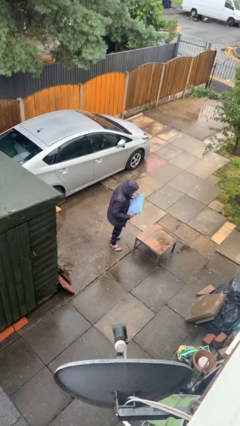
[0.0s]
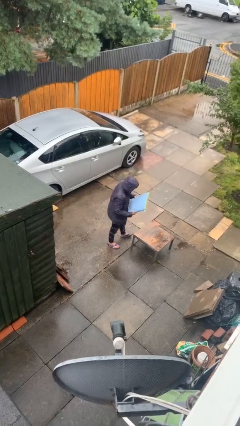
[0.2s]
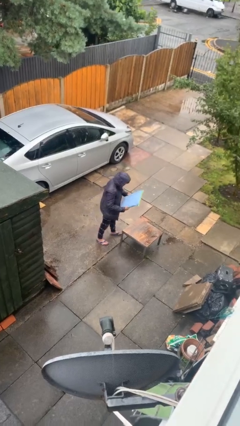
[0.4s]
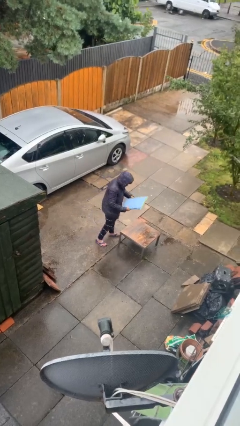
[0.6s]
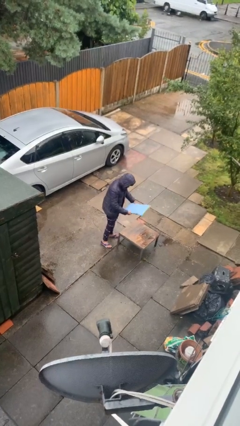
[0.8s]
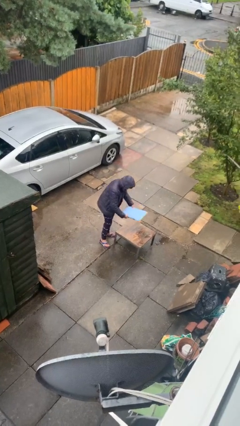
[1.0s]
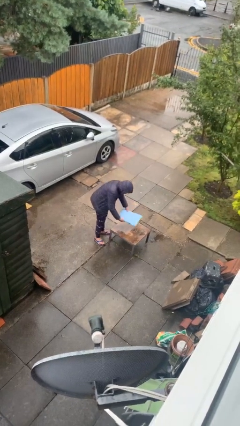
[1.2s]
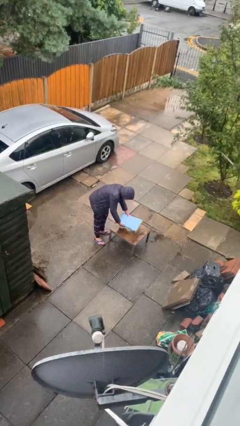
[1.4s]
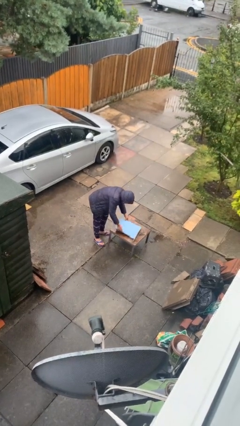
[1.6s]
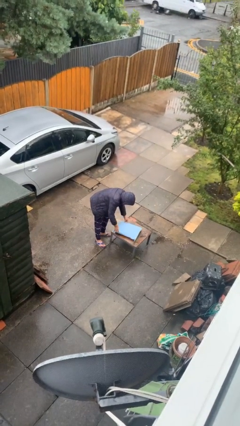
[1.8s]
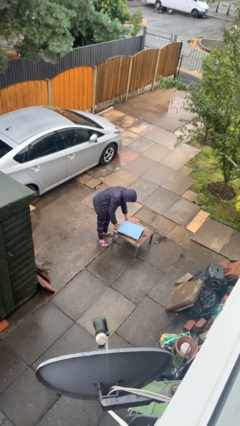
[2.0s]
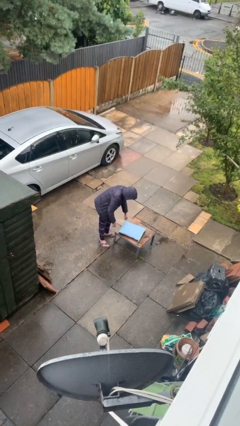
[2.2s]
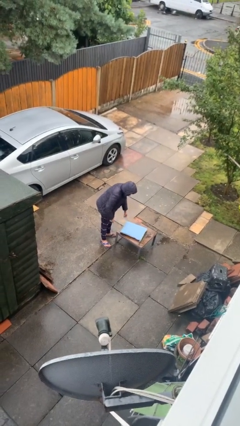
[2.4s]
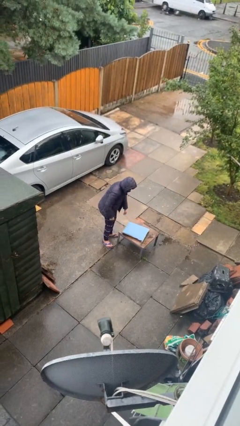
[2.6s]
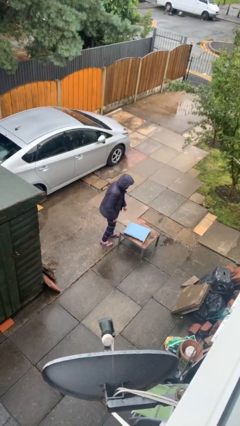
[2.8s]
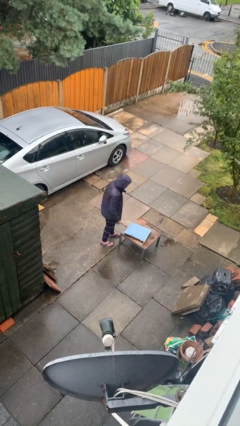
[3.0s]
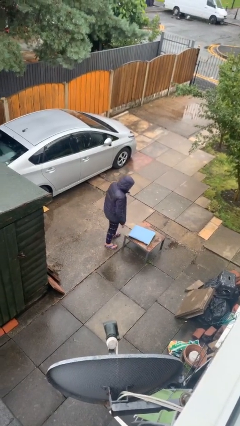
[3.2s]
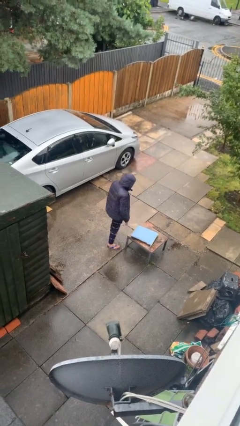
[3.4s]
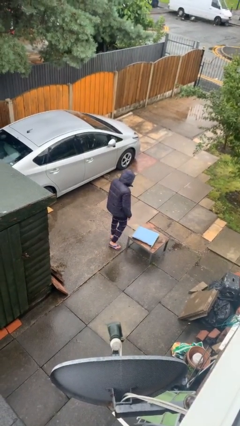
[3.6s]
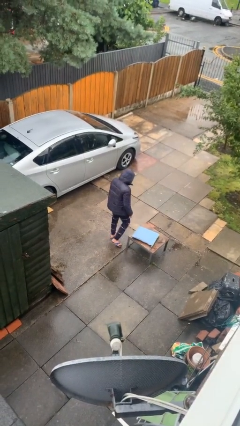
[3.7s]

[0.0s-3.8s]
person puts down object on table

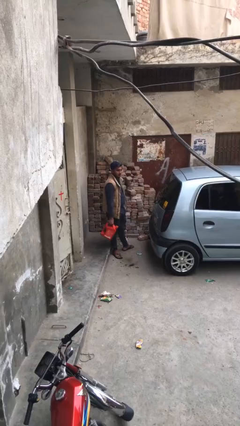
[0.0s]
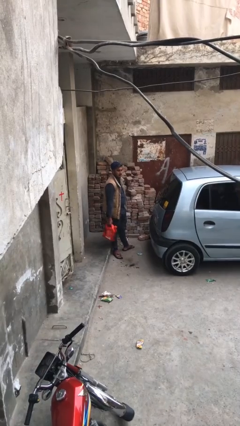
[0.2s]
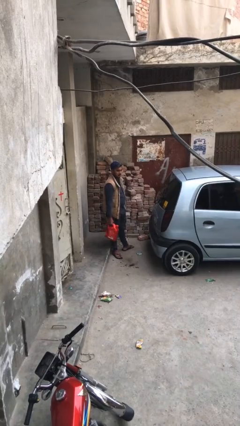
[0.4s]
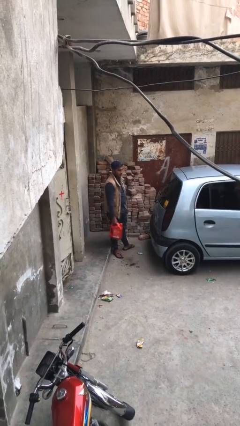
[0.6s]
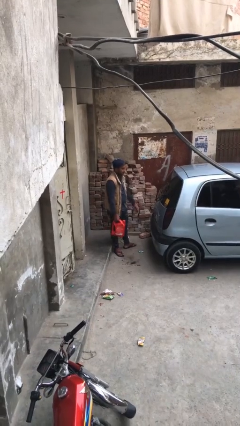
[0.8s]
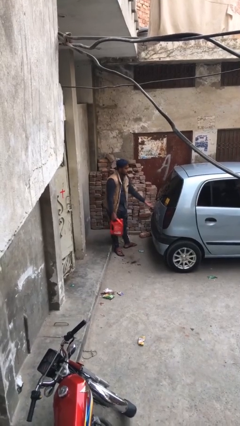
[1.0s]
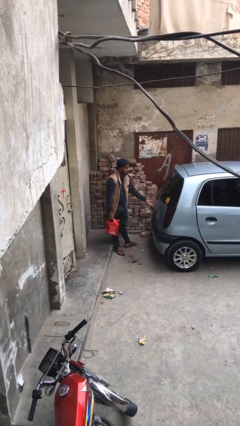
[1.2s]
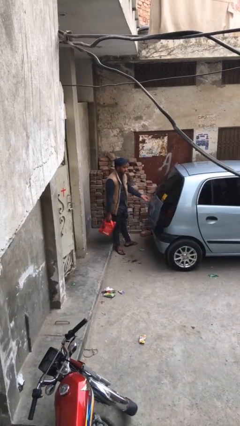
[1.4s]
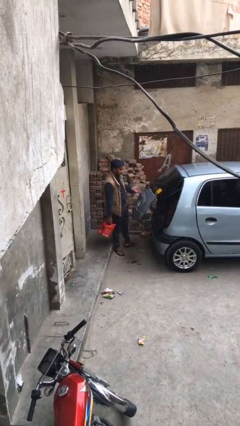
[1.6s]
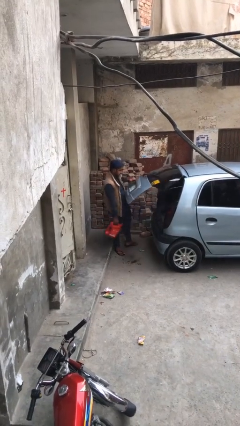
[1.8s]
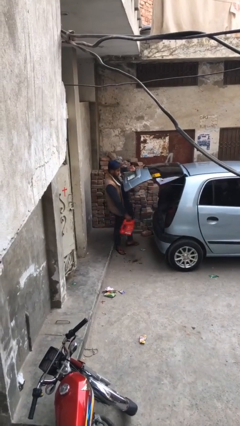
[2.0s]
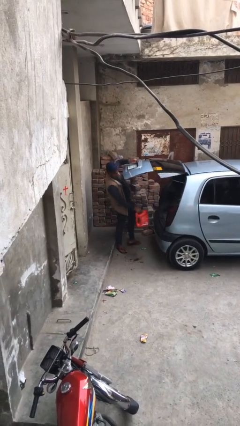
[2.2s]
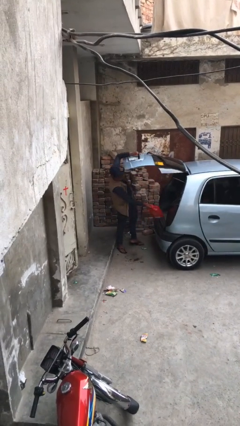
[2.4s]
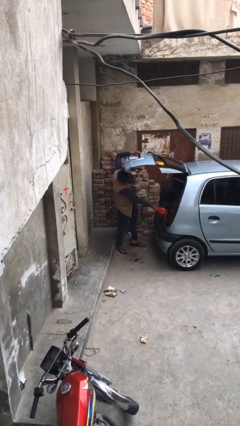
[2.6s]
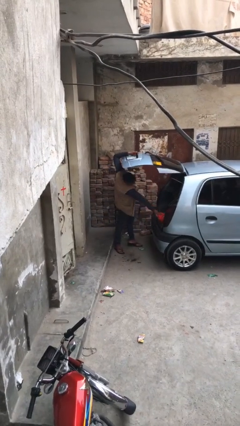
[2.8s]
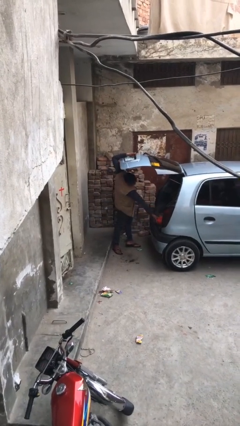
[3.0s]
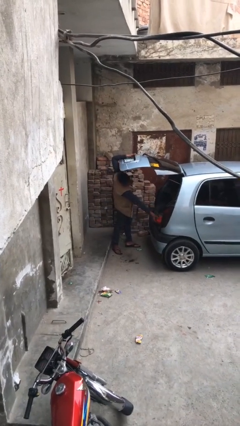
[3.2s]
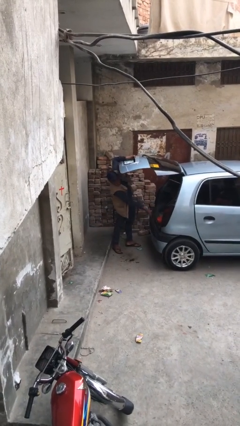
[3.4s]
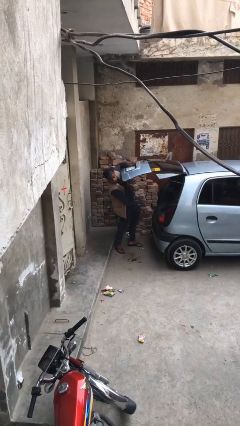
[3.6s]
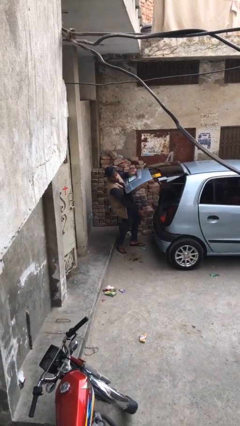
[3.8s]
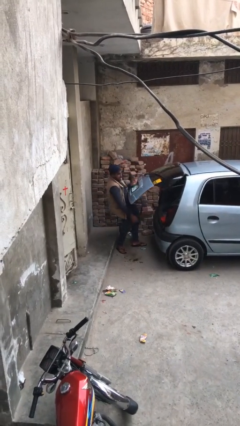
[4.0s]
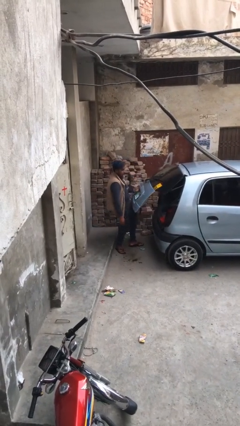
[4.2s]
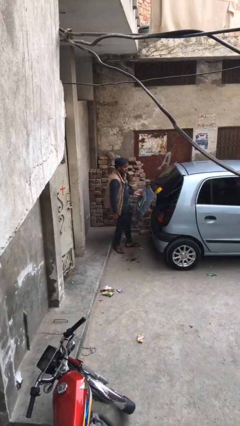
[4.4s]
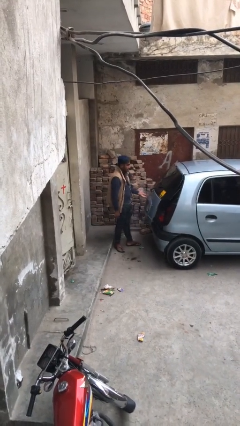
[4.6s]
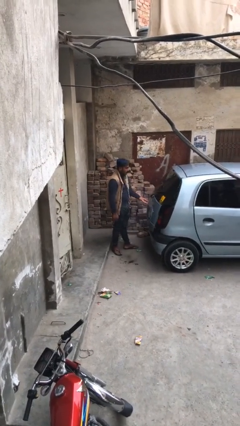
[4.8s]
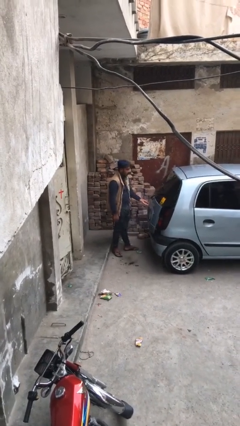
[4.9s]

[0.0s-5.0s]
person loads car

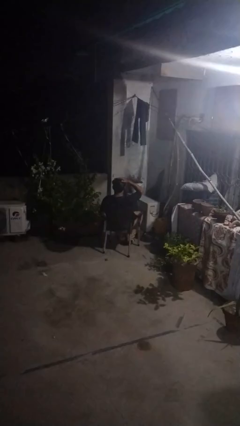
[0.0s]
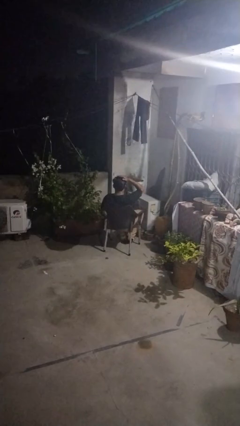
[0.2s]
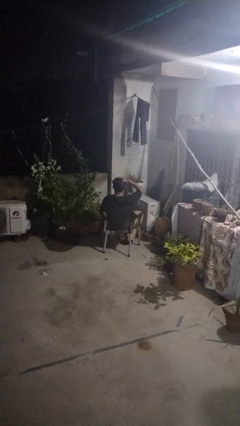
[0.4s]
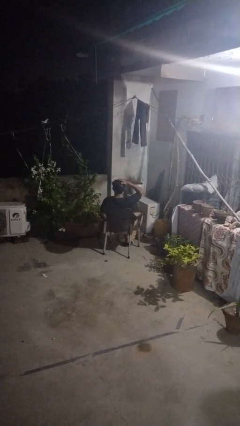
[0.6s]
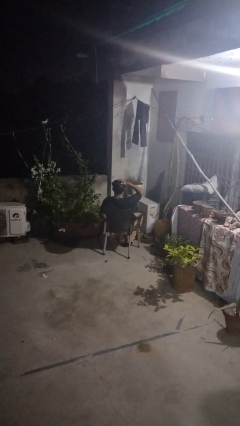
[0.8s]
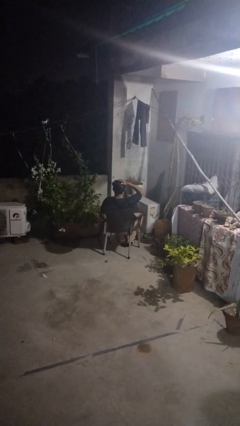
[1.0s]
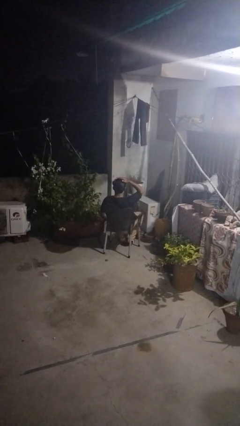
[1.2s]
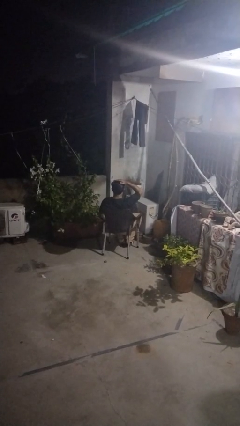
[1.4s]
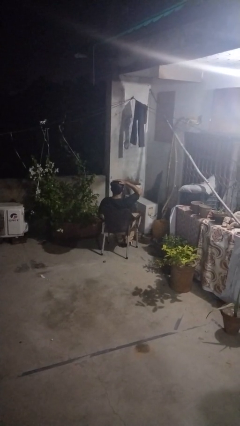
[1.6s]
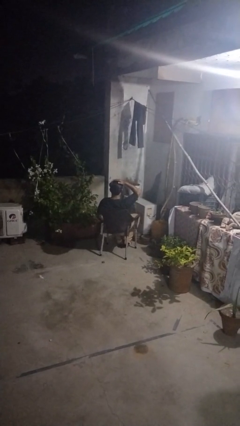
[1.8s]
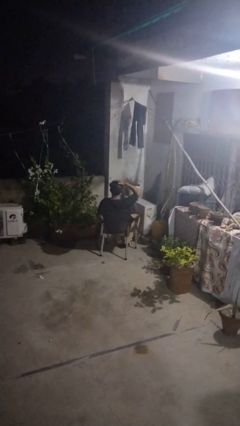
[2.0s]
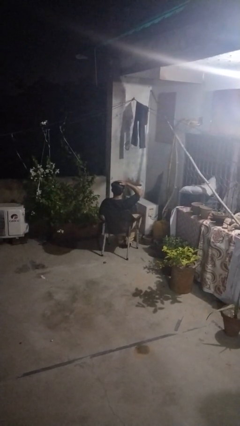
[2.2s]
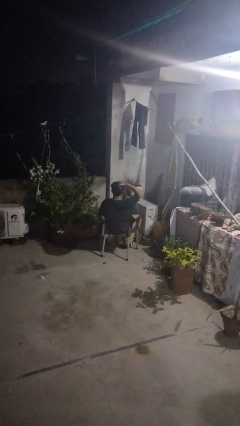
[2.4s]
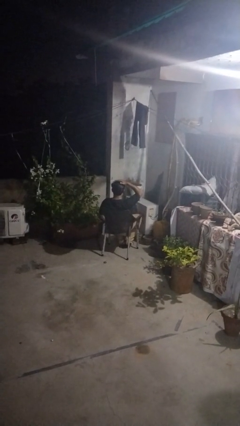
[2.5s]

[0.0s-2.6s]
person pats head

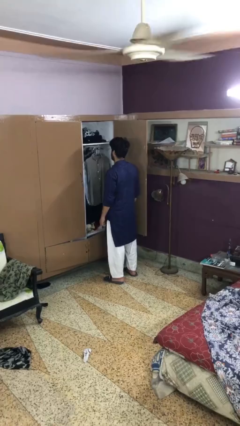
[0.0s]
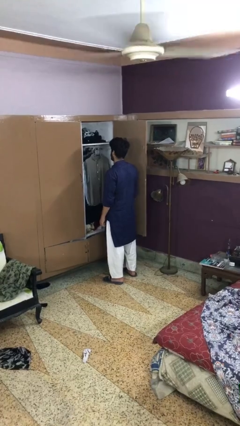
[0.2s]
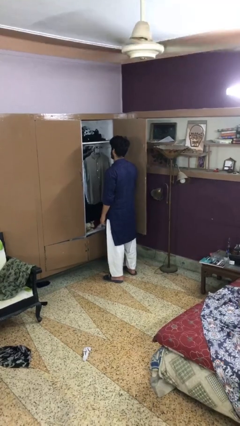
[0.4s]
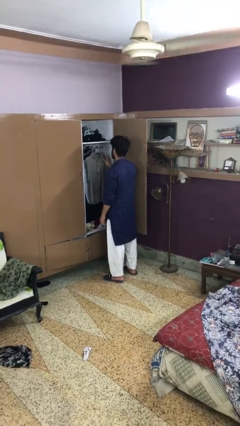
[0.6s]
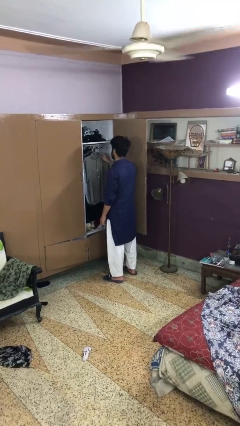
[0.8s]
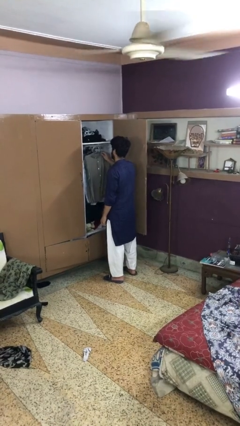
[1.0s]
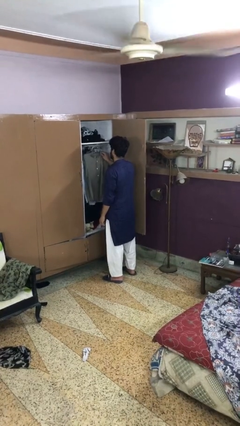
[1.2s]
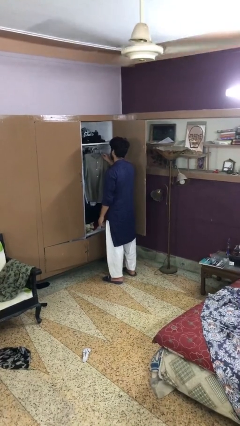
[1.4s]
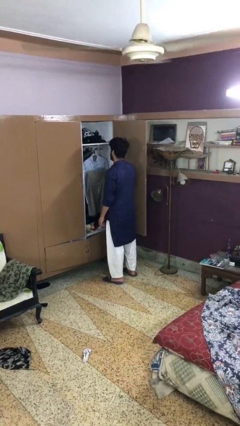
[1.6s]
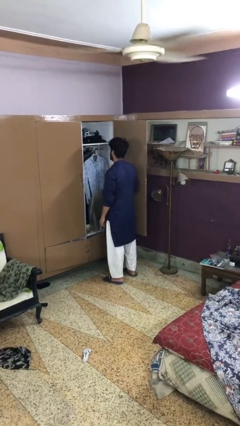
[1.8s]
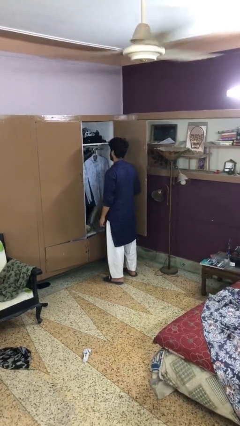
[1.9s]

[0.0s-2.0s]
person takes clothes from closet

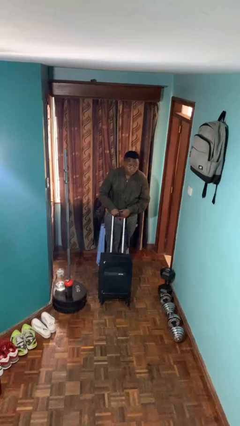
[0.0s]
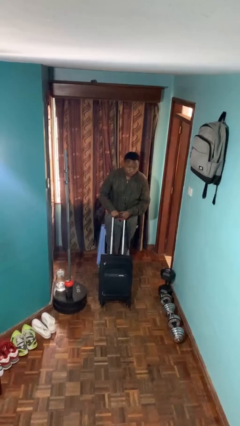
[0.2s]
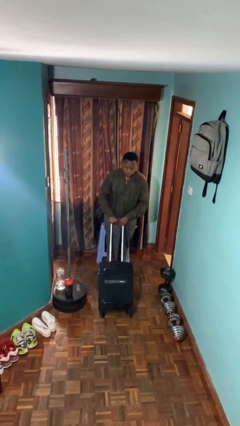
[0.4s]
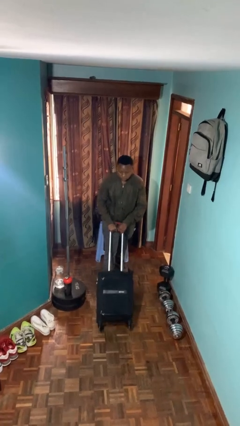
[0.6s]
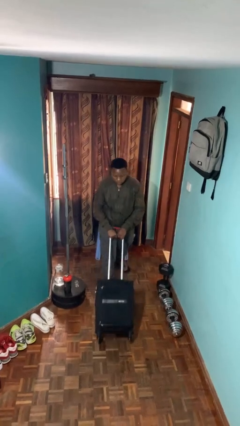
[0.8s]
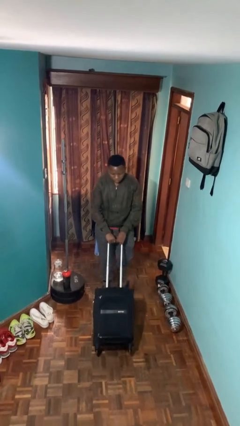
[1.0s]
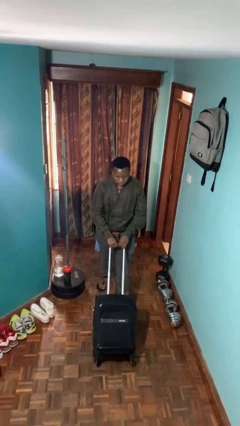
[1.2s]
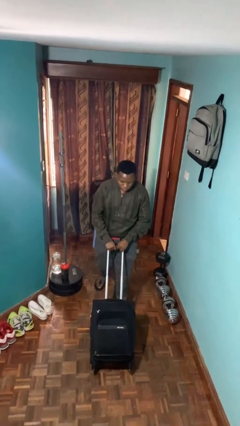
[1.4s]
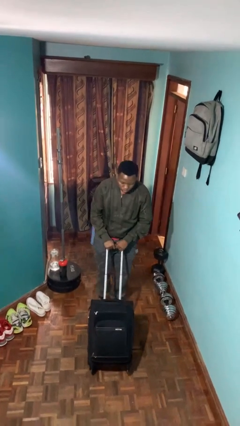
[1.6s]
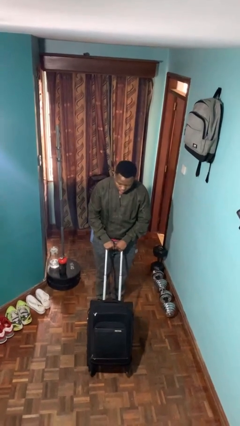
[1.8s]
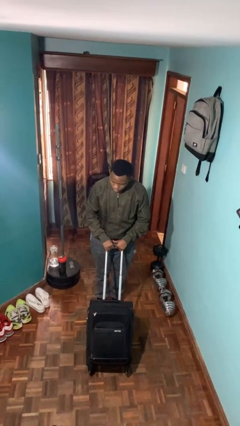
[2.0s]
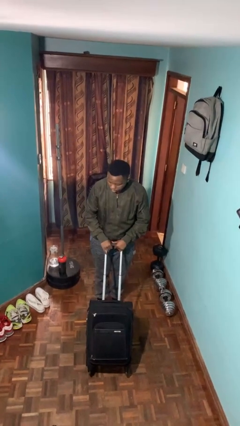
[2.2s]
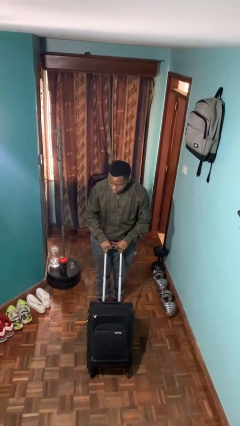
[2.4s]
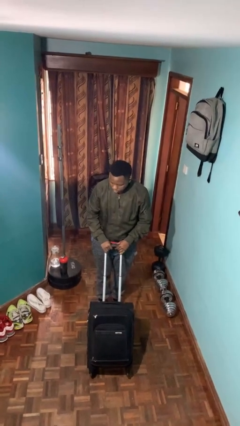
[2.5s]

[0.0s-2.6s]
person pushes wheeled cart

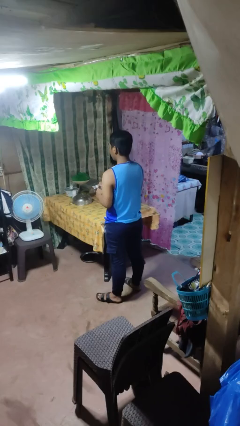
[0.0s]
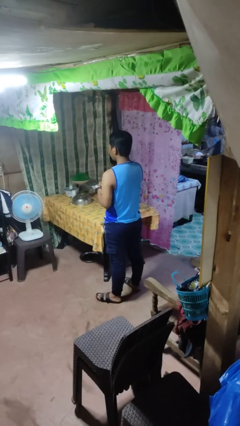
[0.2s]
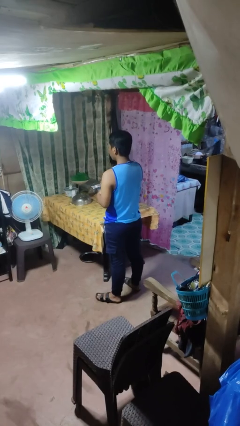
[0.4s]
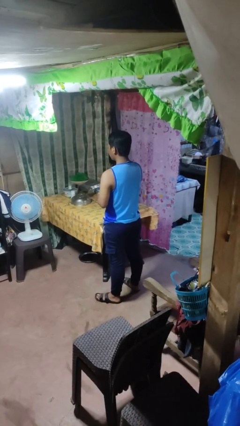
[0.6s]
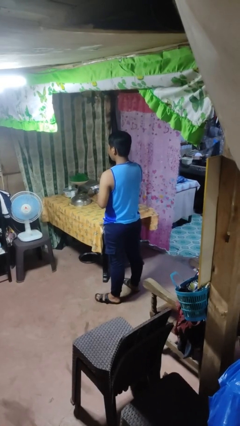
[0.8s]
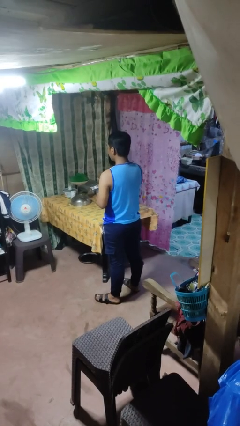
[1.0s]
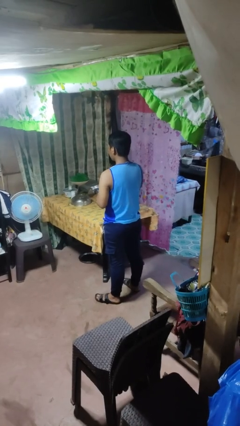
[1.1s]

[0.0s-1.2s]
person closes jar

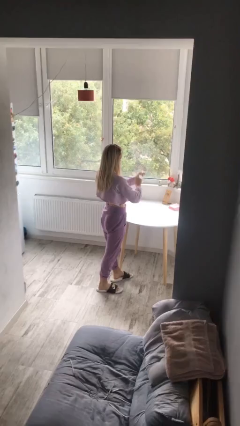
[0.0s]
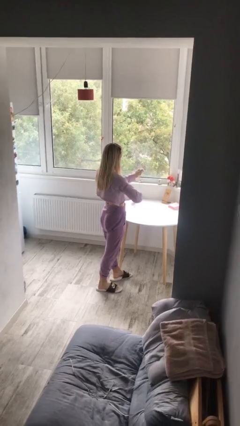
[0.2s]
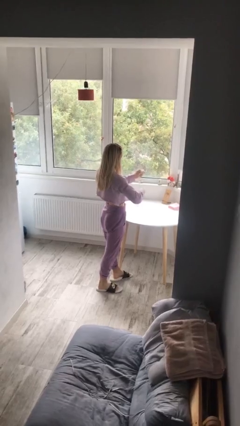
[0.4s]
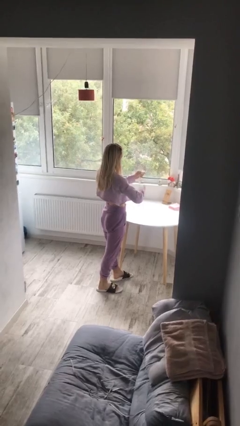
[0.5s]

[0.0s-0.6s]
person tears paper
